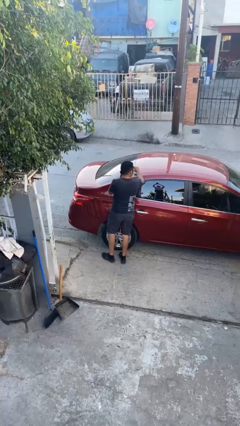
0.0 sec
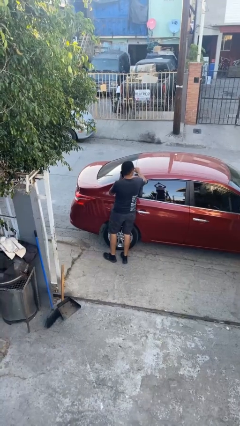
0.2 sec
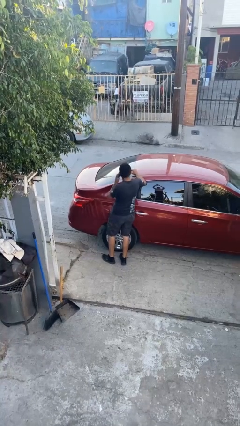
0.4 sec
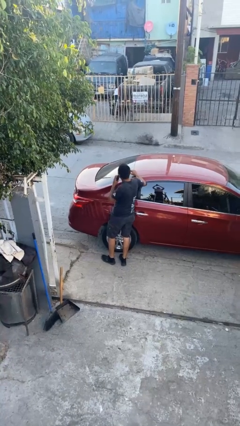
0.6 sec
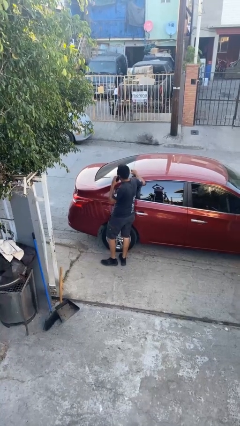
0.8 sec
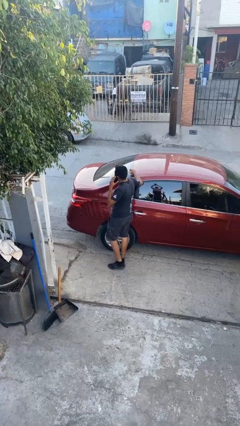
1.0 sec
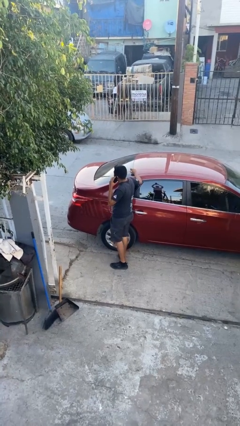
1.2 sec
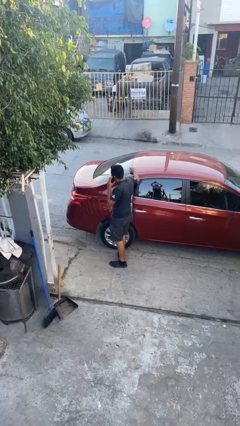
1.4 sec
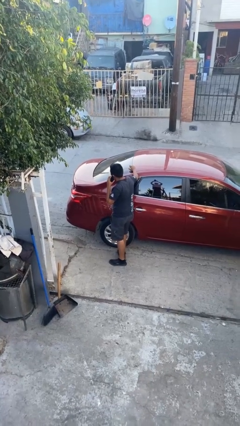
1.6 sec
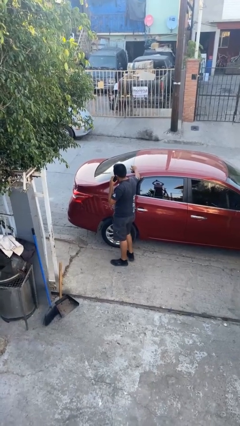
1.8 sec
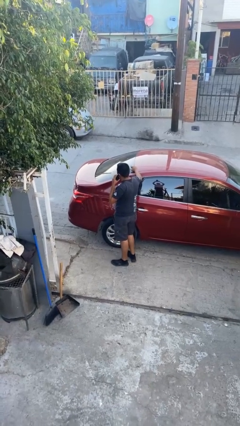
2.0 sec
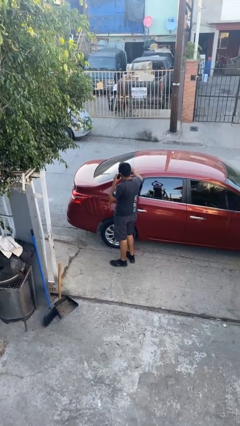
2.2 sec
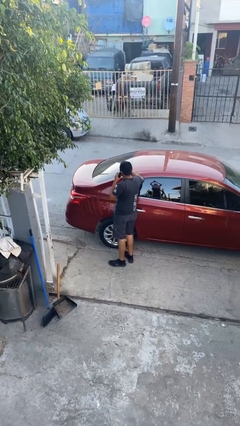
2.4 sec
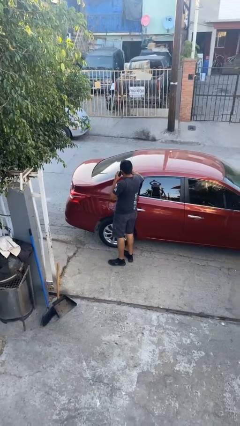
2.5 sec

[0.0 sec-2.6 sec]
person leans against car

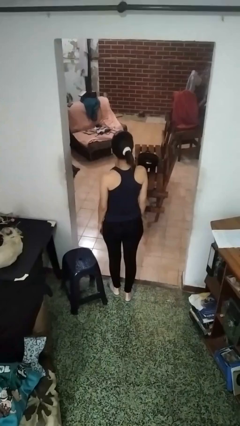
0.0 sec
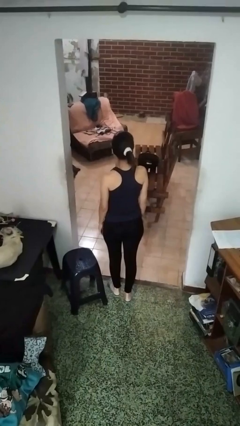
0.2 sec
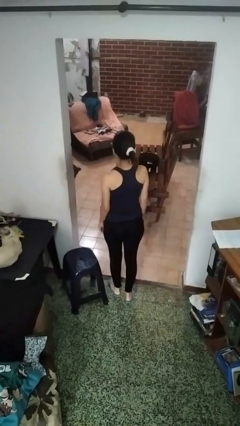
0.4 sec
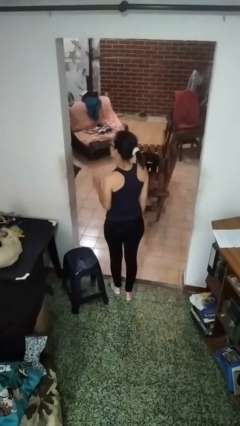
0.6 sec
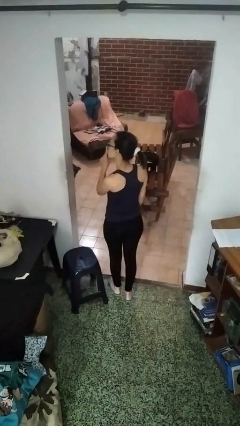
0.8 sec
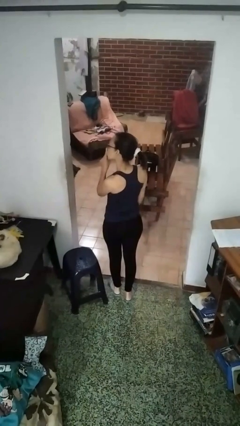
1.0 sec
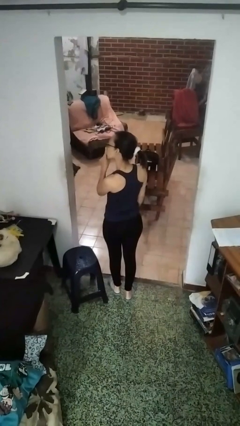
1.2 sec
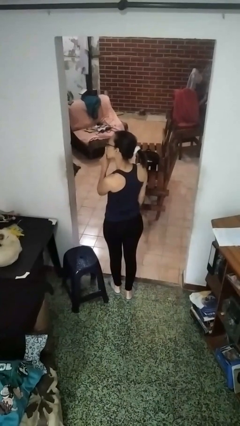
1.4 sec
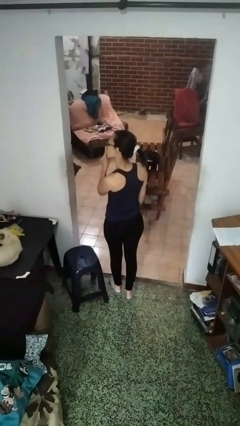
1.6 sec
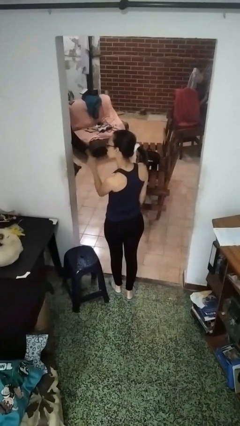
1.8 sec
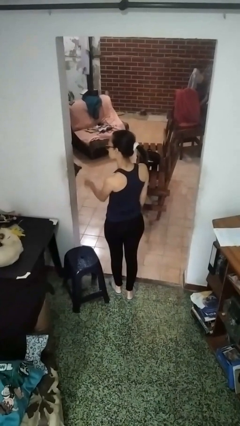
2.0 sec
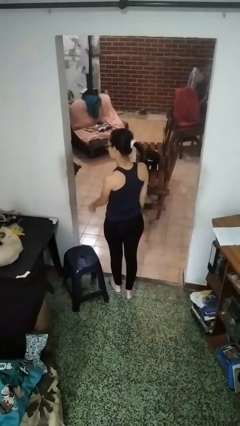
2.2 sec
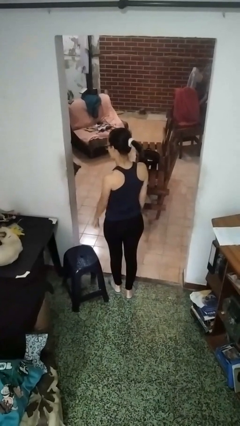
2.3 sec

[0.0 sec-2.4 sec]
person gestures be quiet

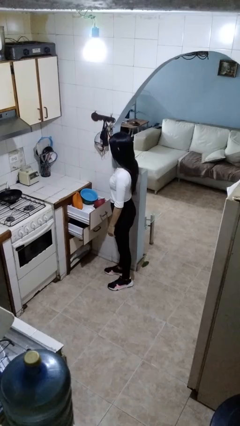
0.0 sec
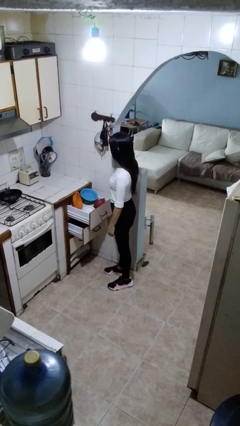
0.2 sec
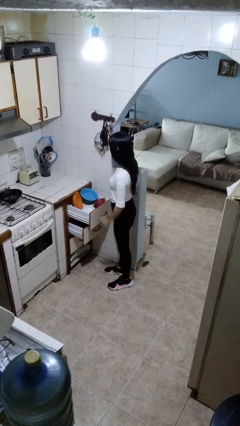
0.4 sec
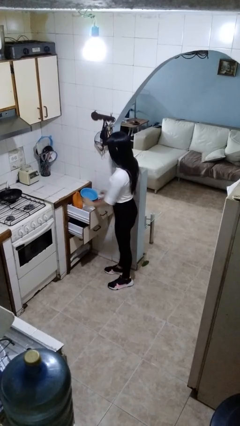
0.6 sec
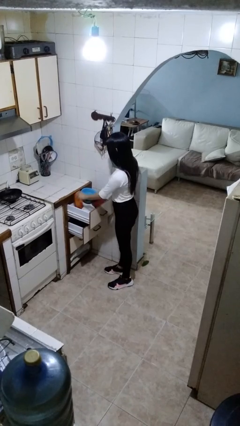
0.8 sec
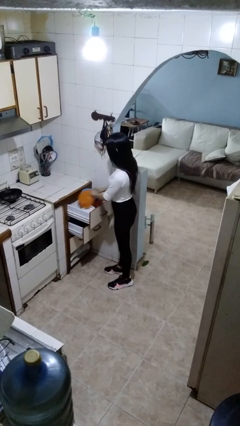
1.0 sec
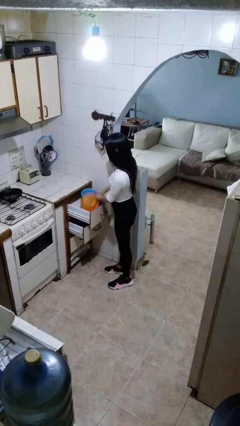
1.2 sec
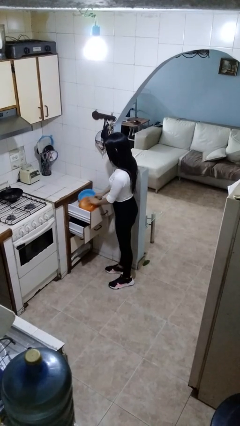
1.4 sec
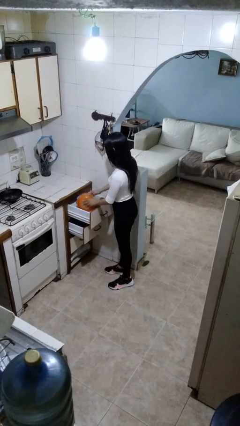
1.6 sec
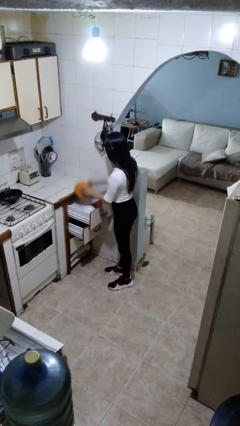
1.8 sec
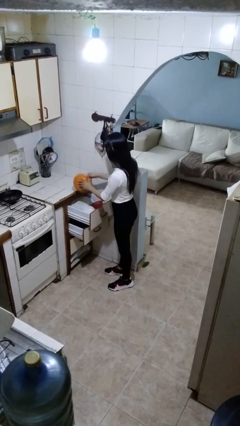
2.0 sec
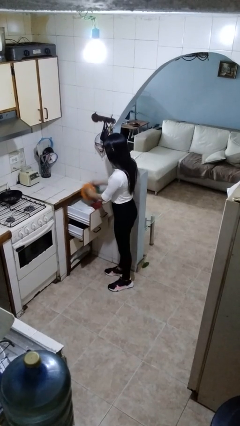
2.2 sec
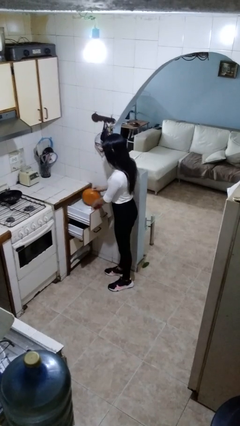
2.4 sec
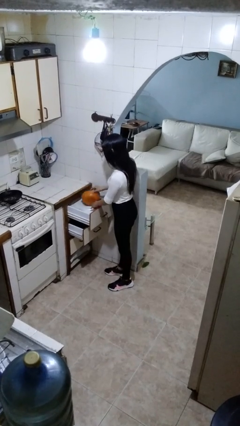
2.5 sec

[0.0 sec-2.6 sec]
person searches in kitchen drawer

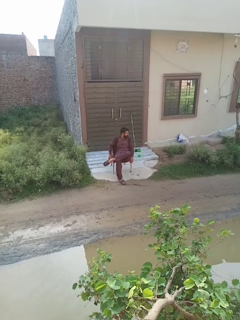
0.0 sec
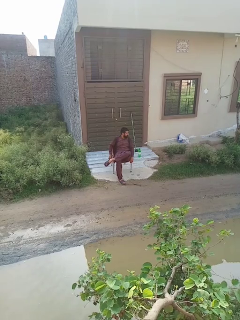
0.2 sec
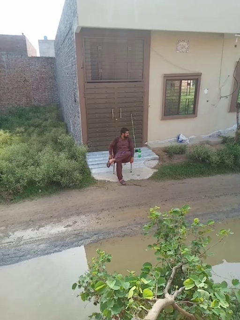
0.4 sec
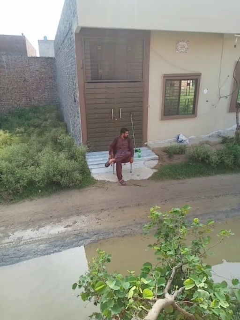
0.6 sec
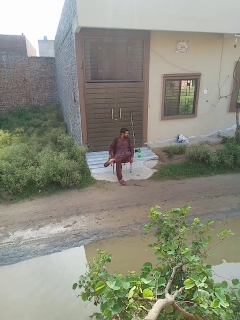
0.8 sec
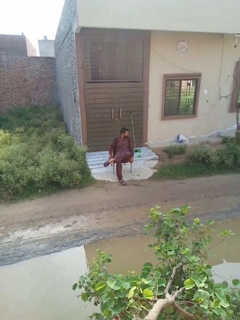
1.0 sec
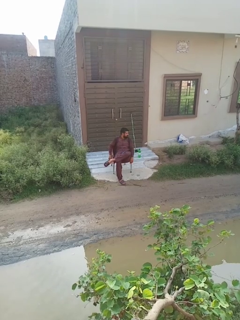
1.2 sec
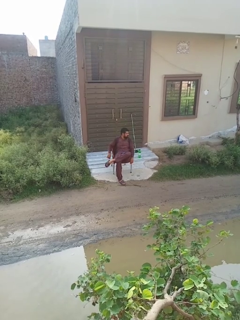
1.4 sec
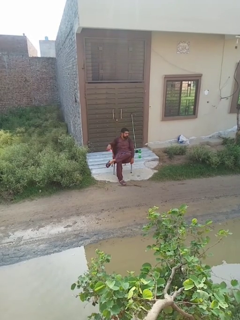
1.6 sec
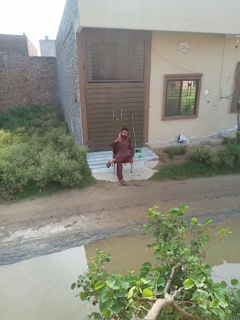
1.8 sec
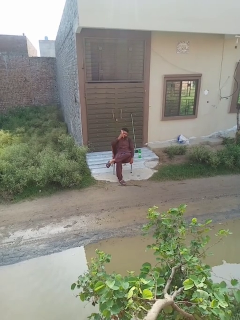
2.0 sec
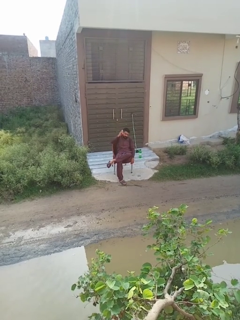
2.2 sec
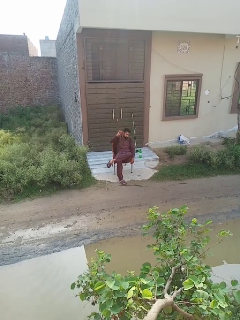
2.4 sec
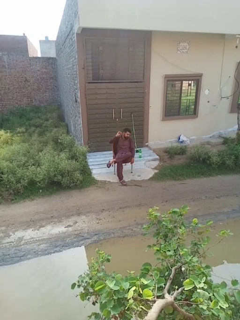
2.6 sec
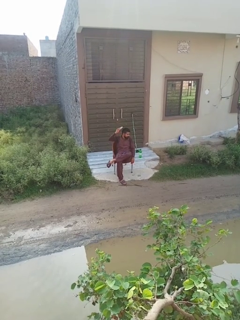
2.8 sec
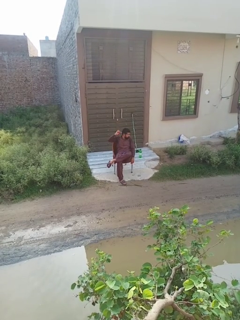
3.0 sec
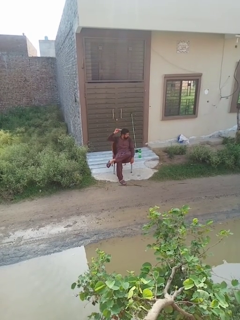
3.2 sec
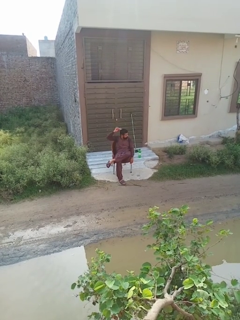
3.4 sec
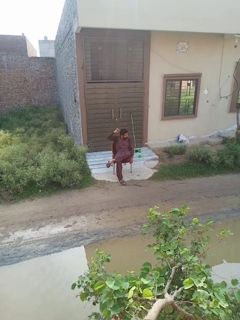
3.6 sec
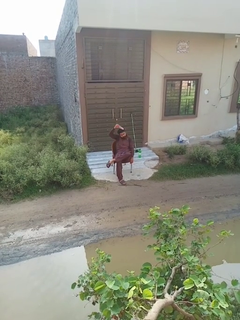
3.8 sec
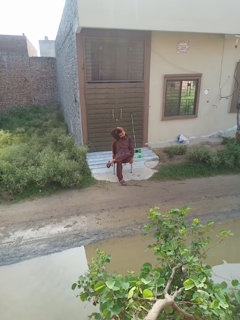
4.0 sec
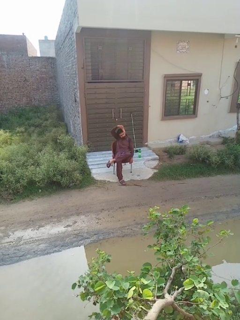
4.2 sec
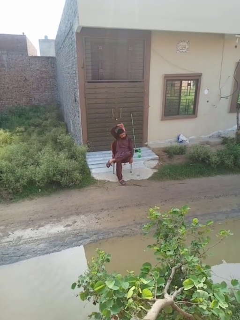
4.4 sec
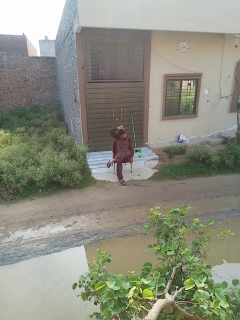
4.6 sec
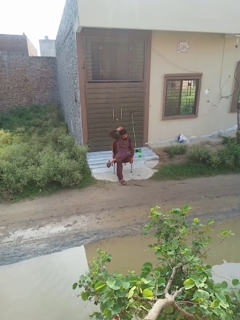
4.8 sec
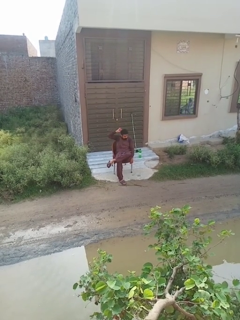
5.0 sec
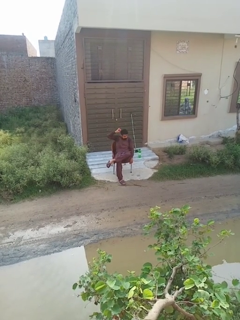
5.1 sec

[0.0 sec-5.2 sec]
person brushes hair

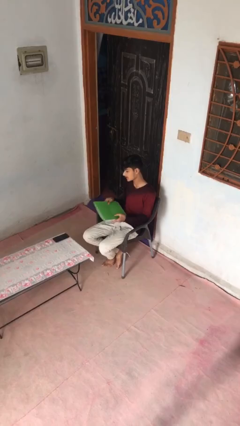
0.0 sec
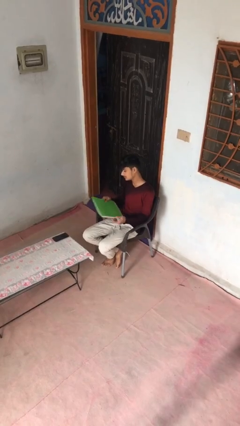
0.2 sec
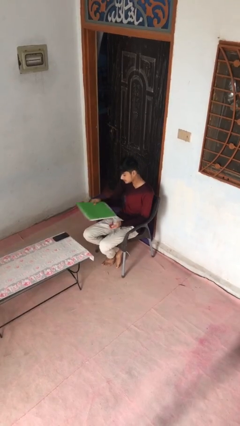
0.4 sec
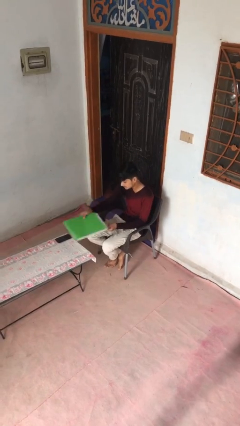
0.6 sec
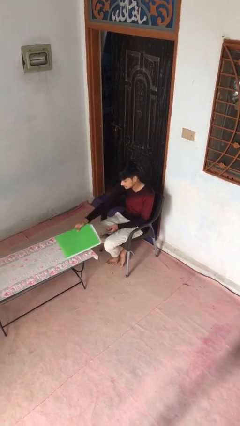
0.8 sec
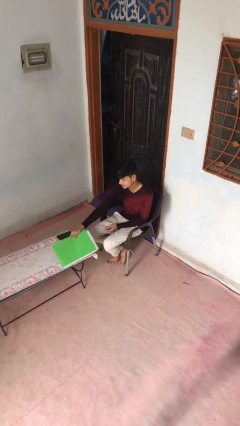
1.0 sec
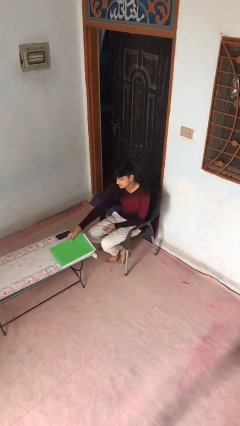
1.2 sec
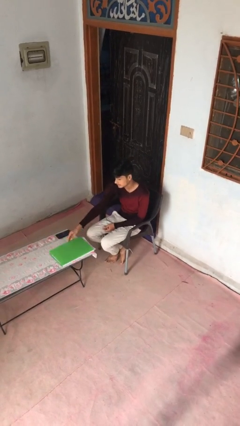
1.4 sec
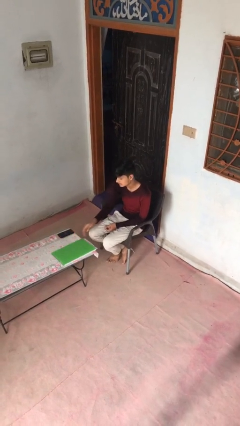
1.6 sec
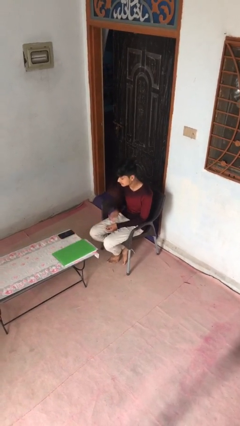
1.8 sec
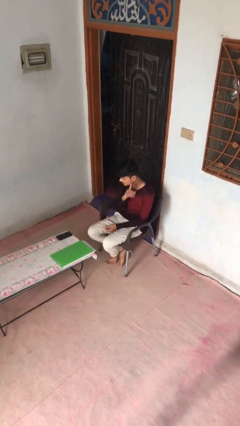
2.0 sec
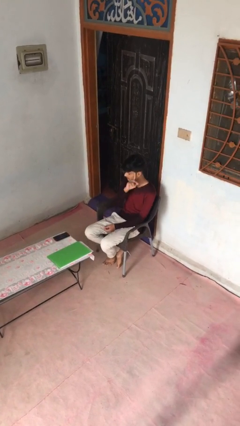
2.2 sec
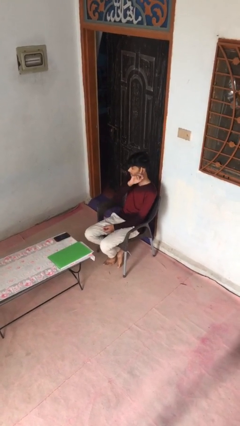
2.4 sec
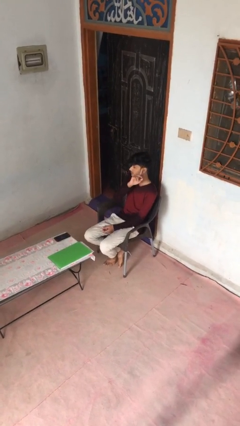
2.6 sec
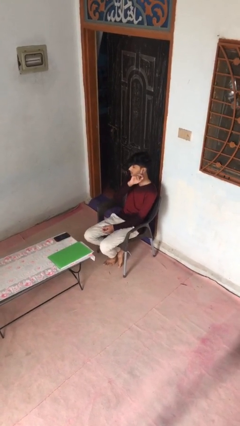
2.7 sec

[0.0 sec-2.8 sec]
person puts down object on table

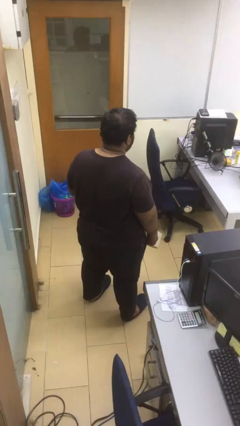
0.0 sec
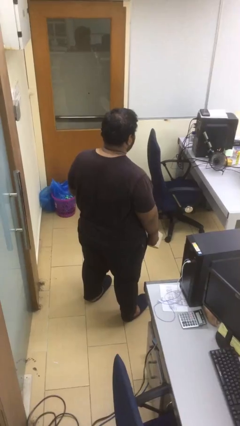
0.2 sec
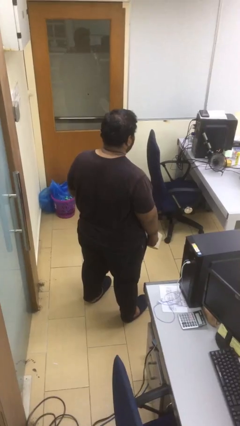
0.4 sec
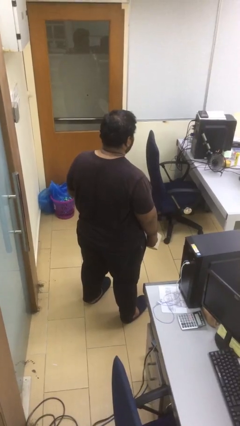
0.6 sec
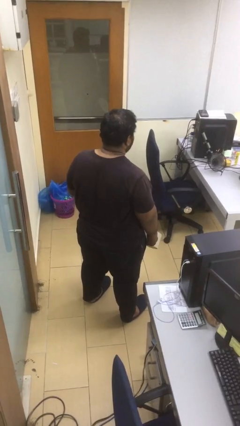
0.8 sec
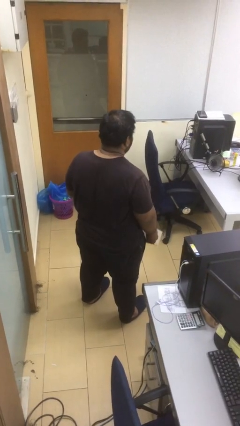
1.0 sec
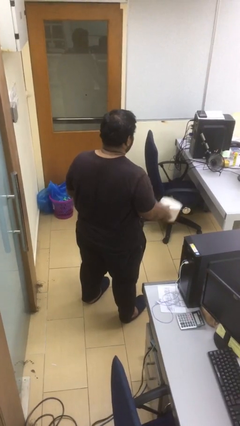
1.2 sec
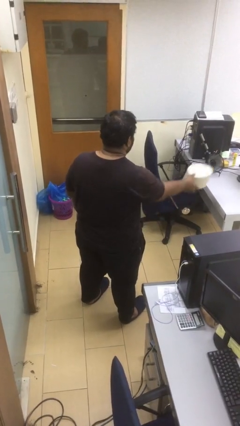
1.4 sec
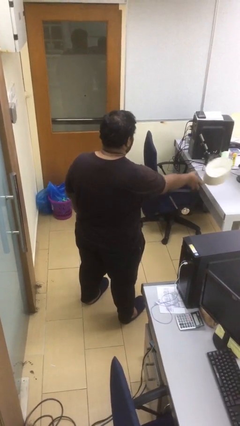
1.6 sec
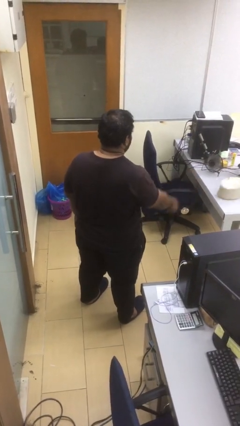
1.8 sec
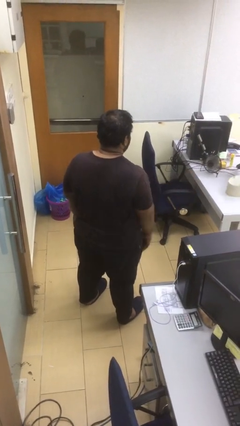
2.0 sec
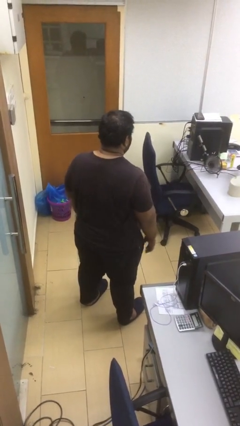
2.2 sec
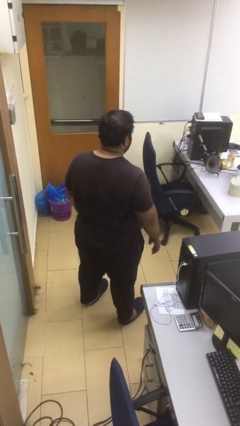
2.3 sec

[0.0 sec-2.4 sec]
person throws object on table

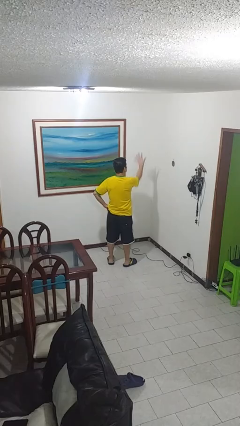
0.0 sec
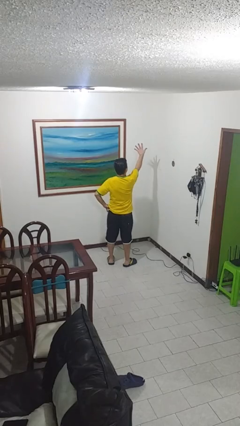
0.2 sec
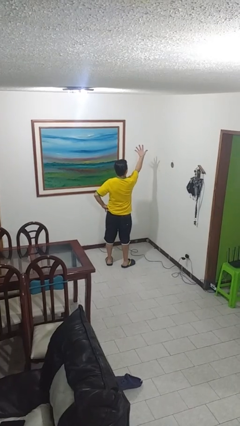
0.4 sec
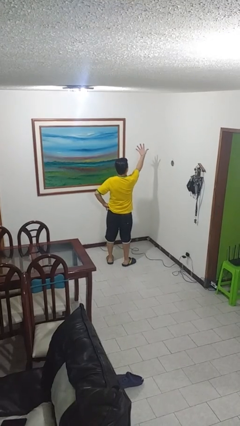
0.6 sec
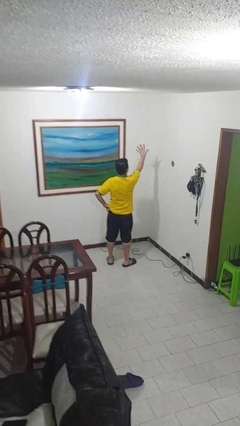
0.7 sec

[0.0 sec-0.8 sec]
person gestures number five
